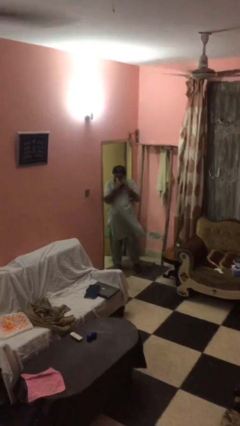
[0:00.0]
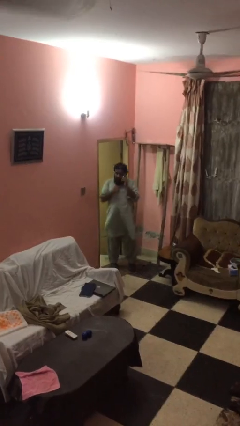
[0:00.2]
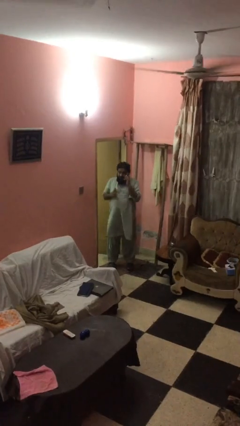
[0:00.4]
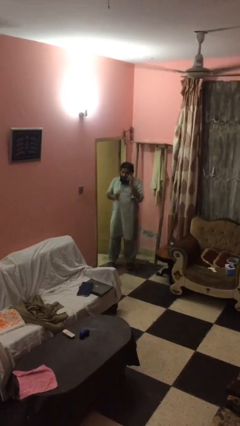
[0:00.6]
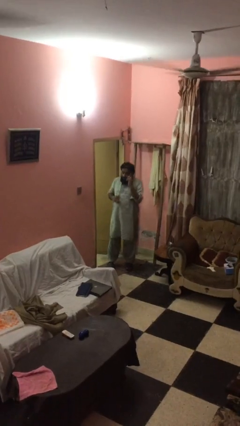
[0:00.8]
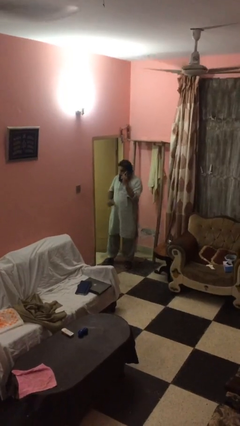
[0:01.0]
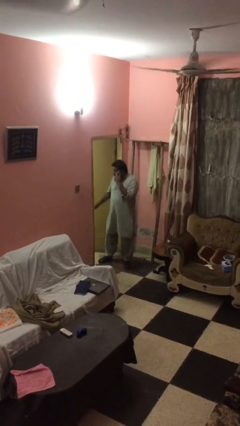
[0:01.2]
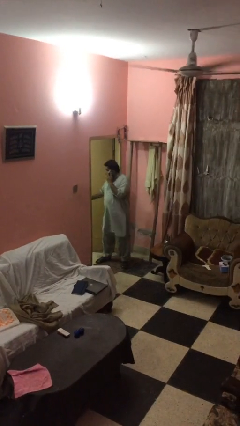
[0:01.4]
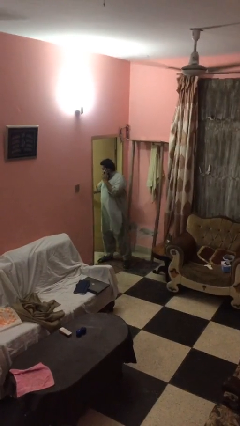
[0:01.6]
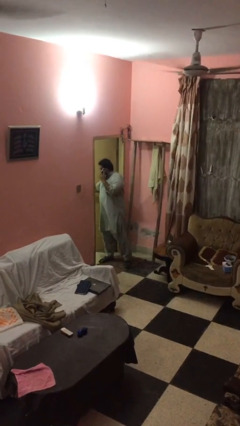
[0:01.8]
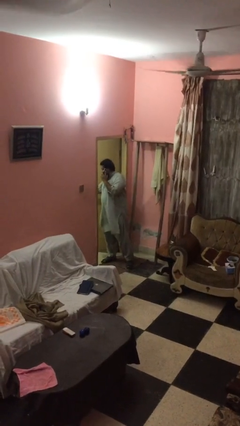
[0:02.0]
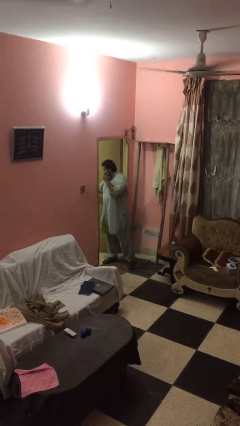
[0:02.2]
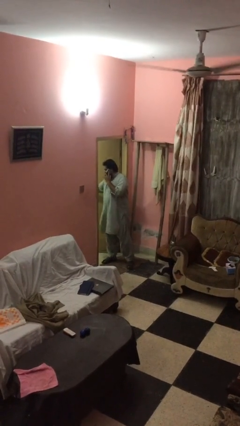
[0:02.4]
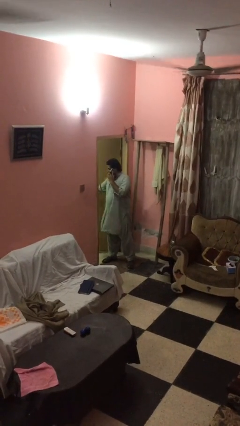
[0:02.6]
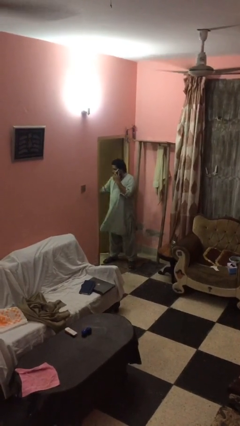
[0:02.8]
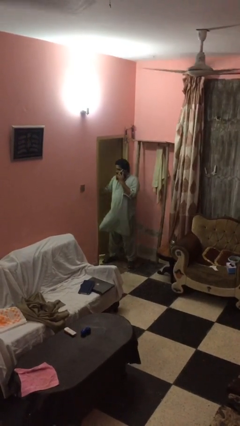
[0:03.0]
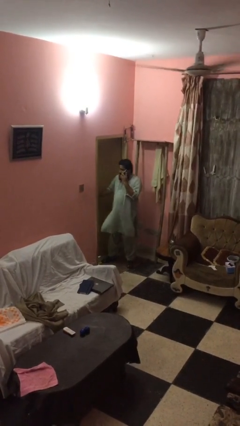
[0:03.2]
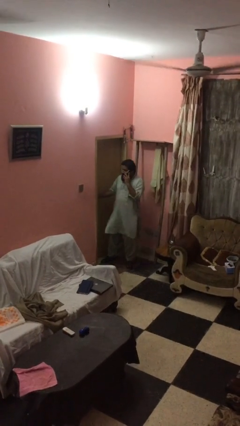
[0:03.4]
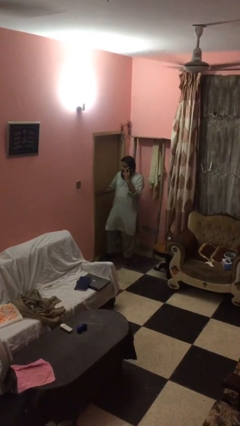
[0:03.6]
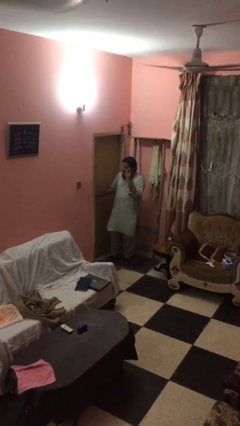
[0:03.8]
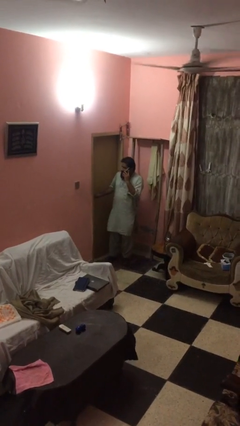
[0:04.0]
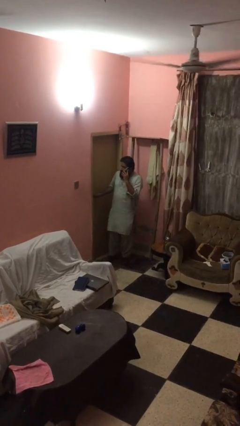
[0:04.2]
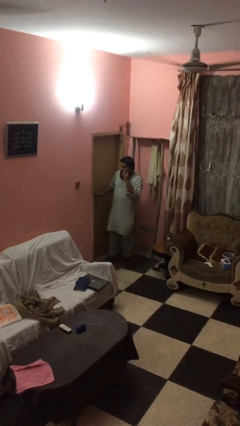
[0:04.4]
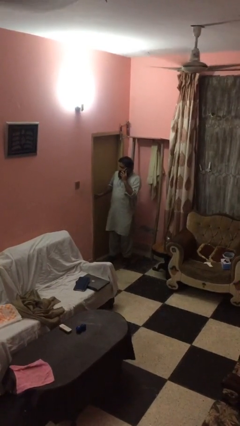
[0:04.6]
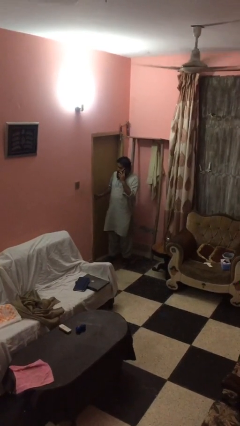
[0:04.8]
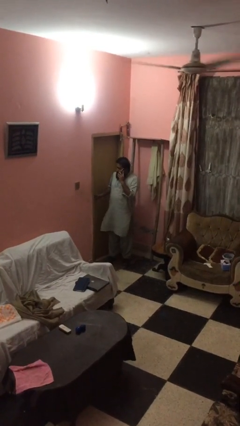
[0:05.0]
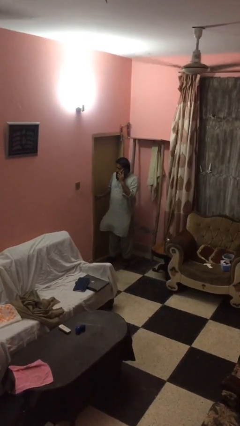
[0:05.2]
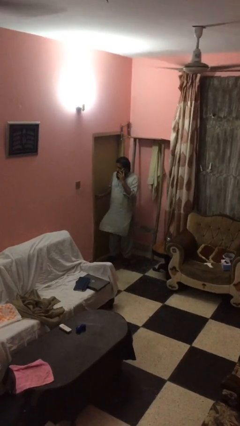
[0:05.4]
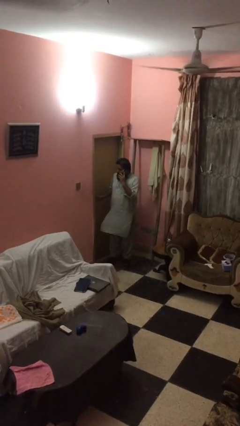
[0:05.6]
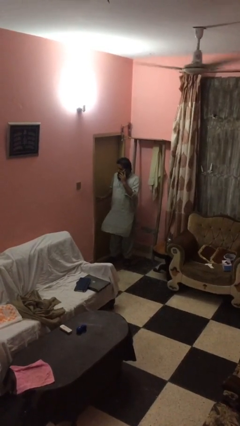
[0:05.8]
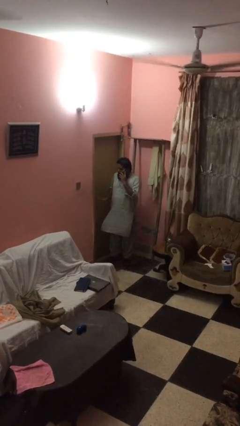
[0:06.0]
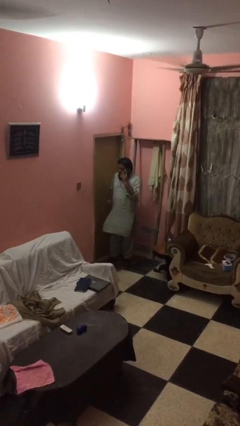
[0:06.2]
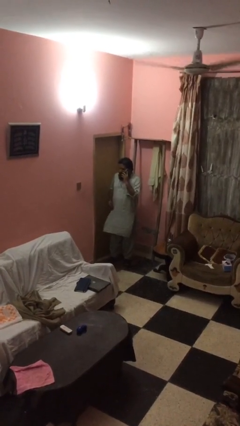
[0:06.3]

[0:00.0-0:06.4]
person closes facility door

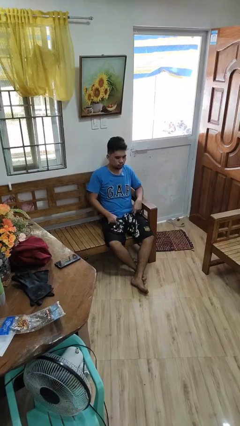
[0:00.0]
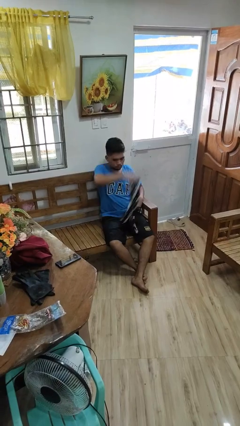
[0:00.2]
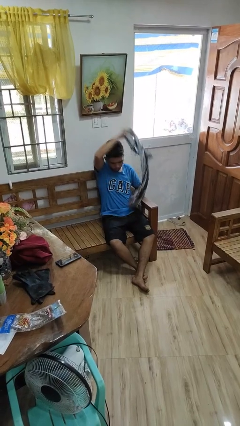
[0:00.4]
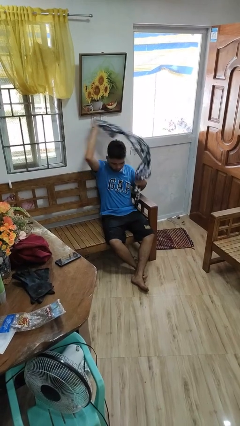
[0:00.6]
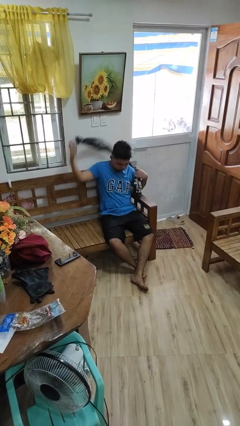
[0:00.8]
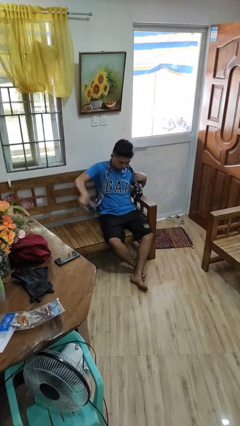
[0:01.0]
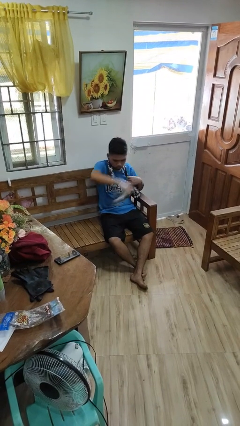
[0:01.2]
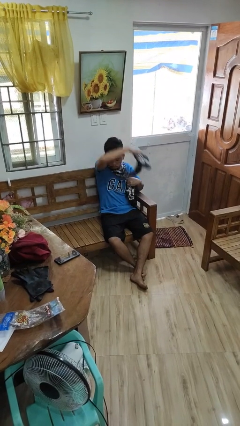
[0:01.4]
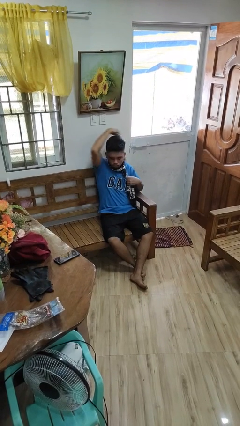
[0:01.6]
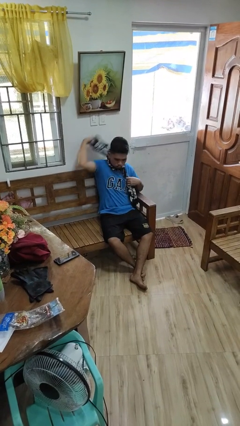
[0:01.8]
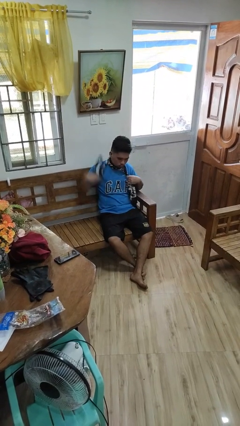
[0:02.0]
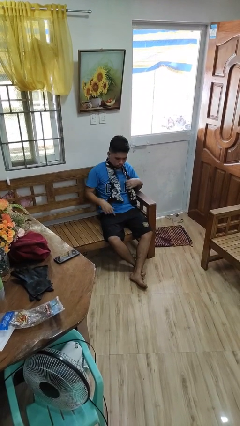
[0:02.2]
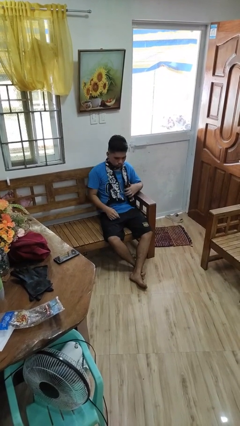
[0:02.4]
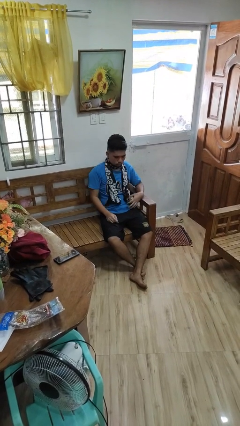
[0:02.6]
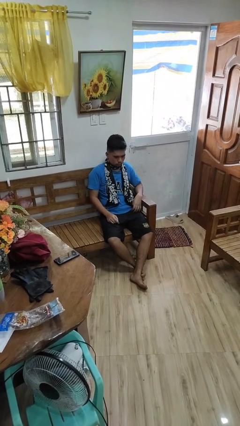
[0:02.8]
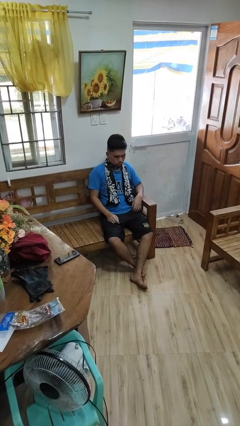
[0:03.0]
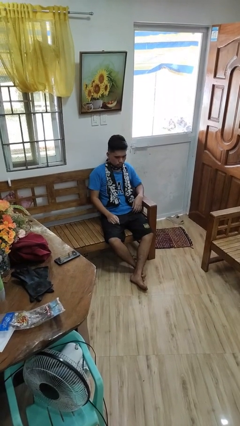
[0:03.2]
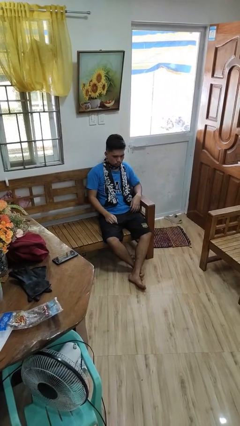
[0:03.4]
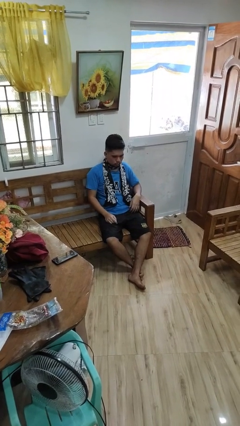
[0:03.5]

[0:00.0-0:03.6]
person puts on scarf

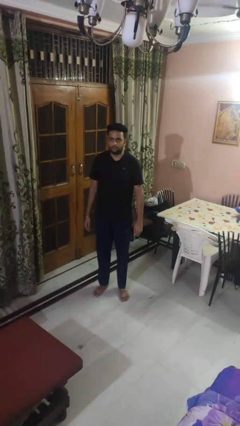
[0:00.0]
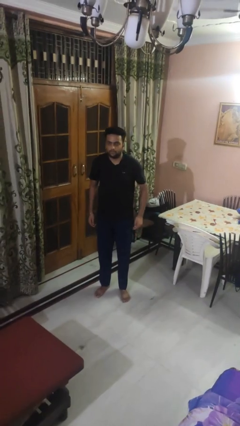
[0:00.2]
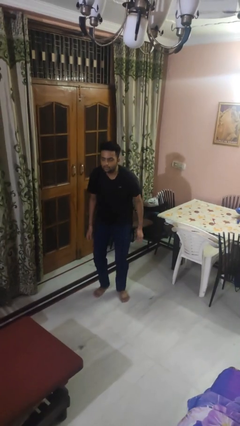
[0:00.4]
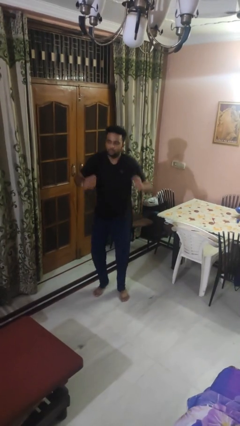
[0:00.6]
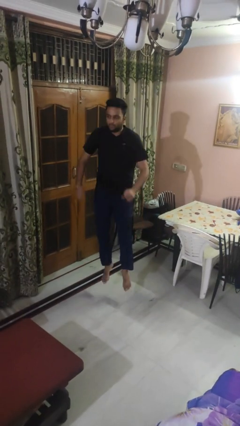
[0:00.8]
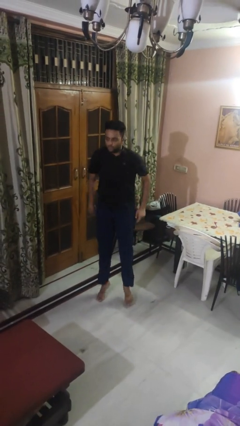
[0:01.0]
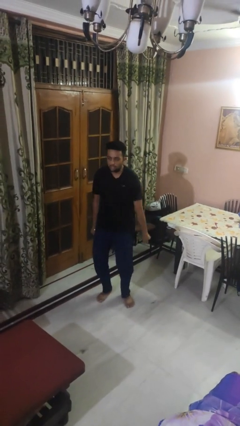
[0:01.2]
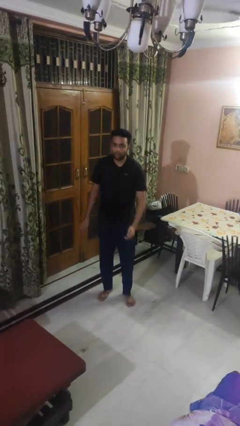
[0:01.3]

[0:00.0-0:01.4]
person jumps

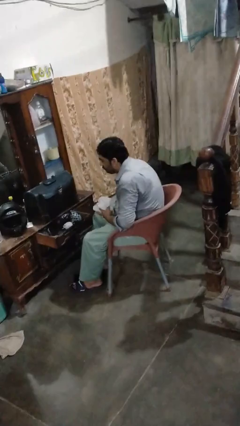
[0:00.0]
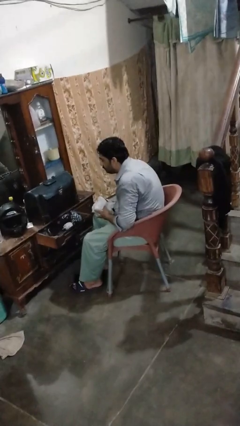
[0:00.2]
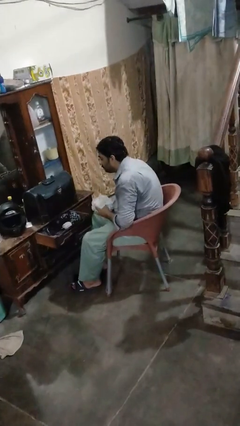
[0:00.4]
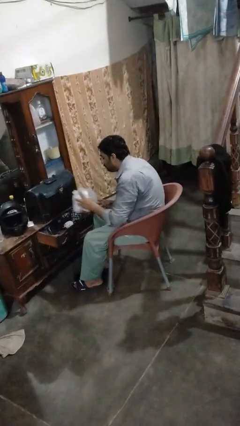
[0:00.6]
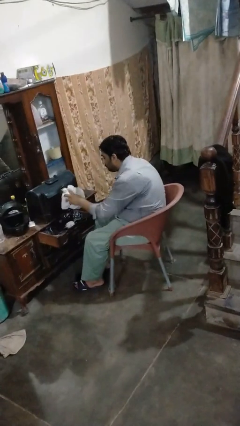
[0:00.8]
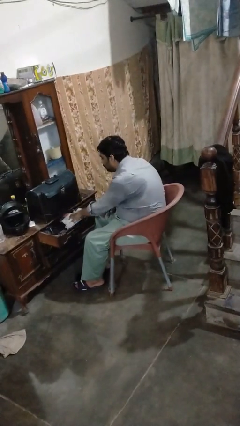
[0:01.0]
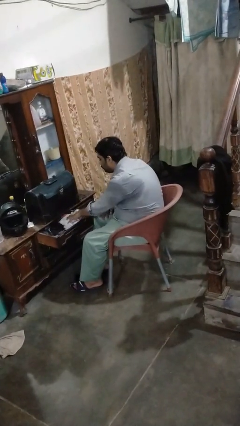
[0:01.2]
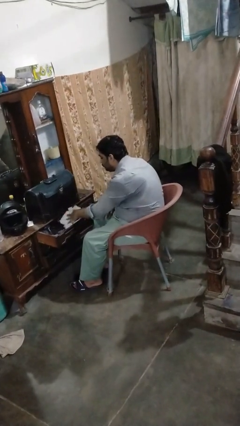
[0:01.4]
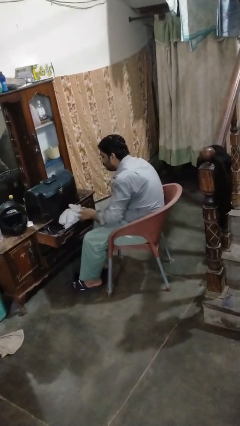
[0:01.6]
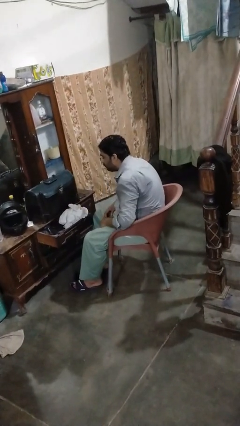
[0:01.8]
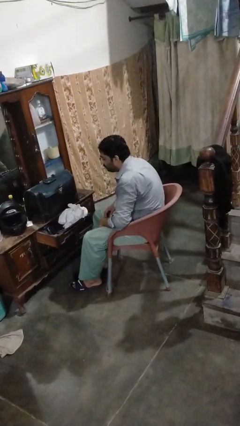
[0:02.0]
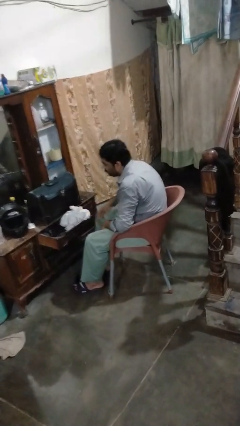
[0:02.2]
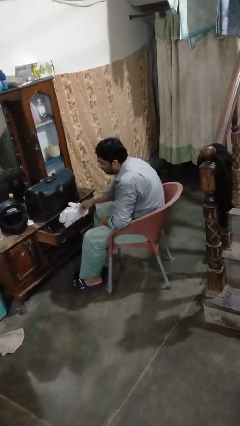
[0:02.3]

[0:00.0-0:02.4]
person puts clothes into dresser

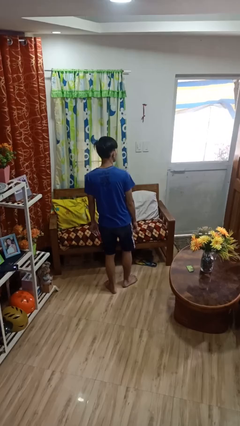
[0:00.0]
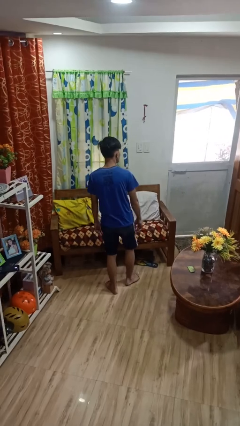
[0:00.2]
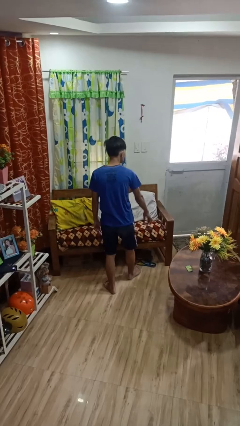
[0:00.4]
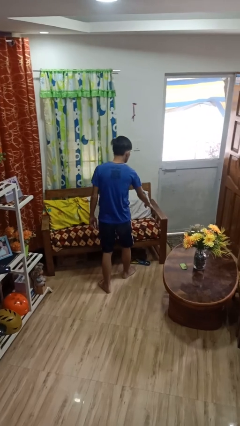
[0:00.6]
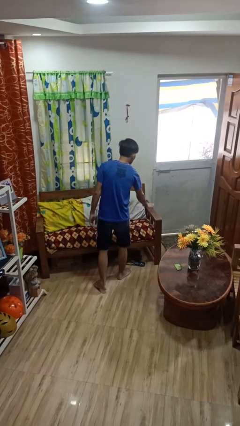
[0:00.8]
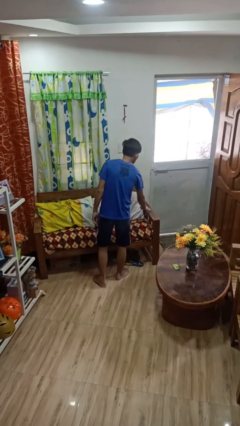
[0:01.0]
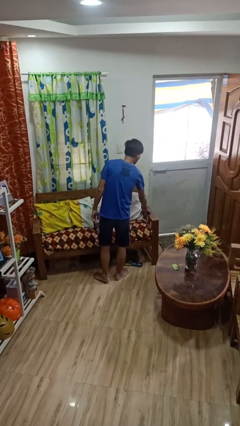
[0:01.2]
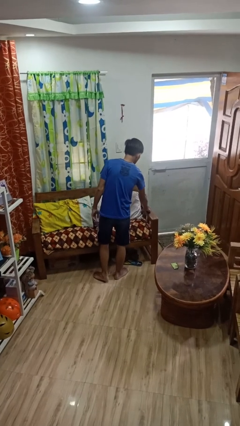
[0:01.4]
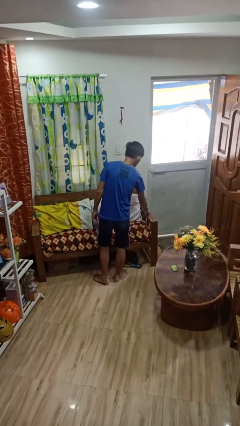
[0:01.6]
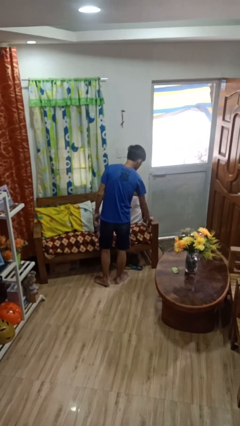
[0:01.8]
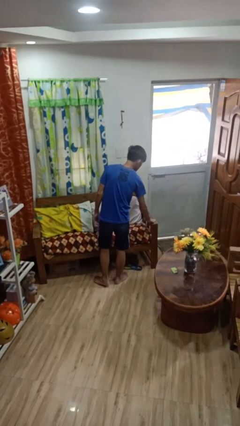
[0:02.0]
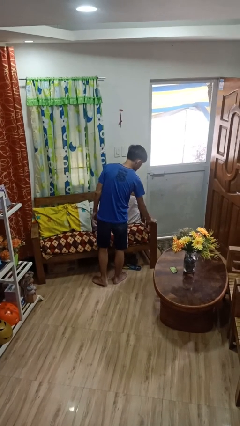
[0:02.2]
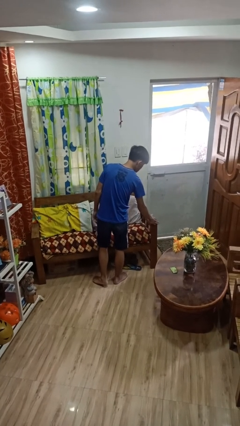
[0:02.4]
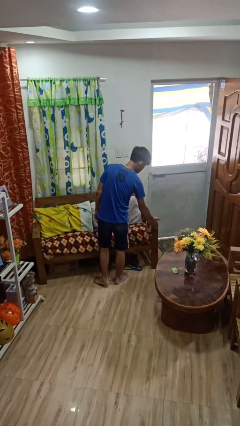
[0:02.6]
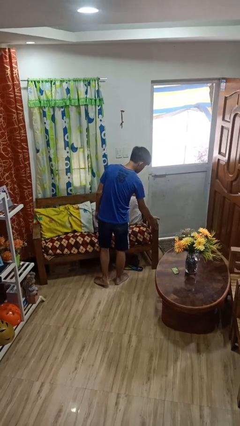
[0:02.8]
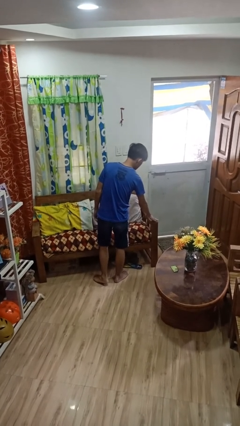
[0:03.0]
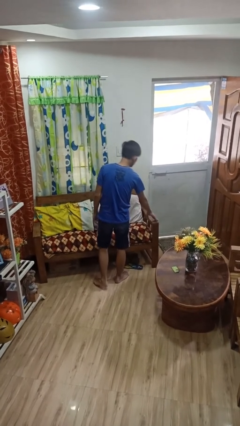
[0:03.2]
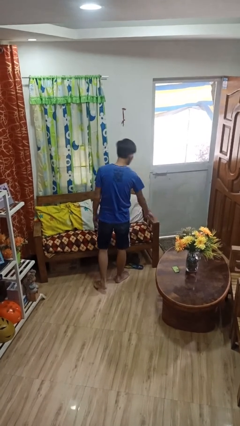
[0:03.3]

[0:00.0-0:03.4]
person taps object with finger

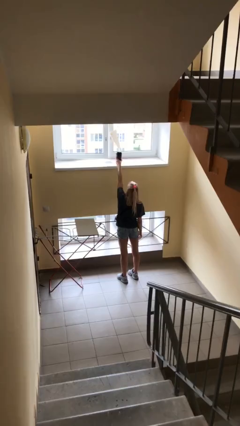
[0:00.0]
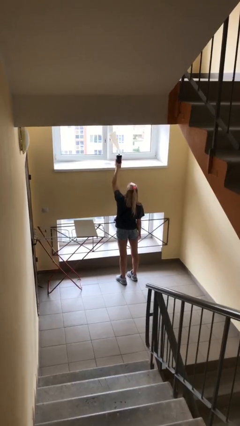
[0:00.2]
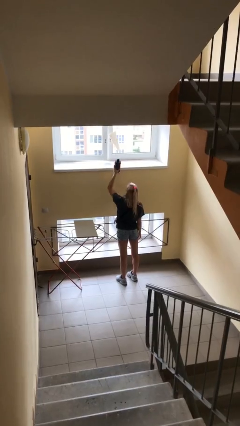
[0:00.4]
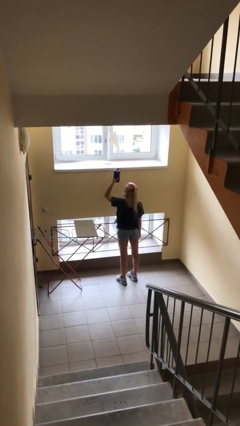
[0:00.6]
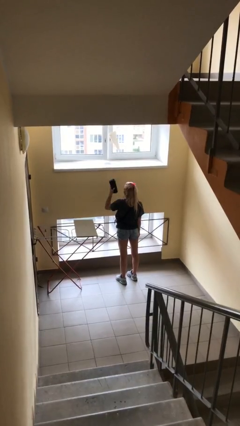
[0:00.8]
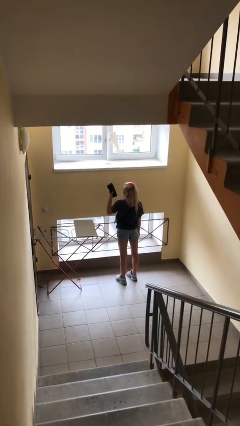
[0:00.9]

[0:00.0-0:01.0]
person picks up object from shelf
